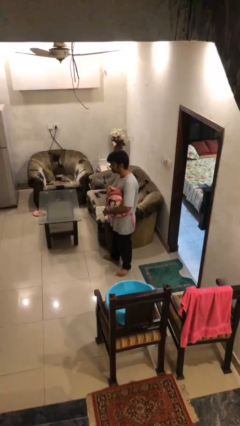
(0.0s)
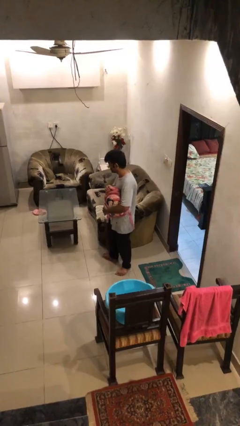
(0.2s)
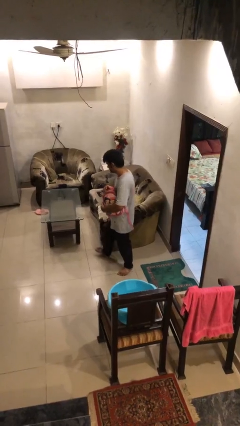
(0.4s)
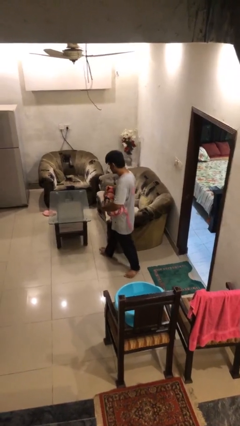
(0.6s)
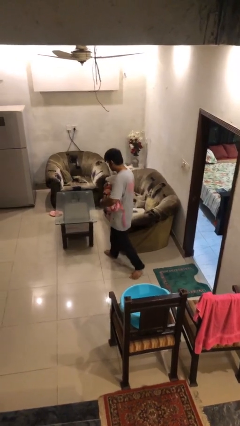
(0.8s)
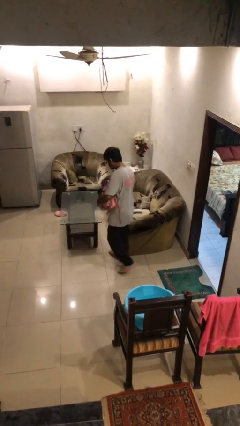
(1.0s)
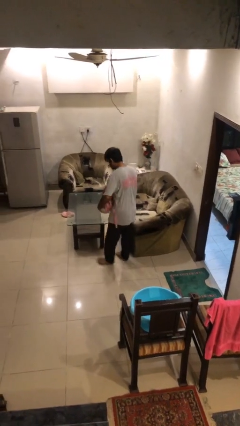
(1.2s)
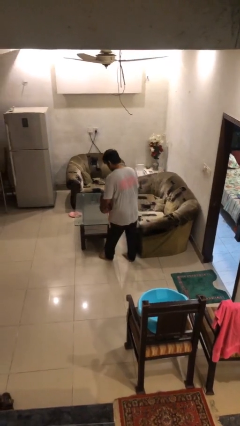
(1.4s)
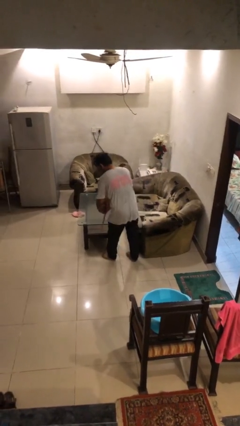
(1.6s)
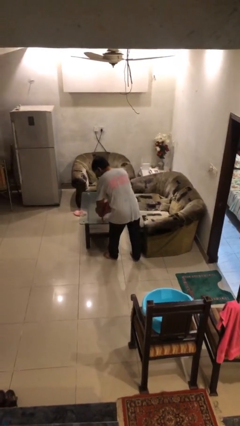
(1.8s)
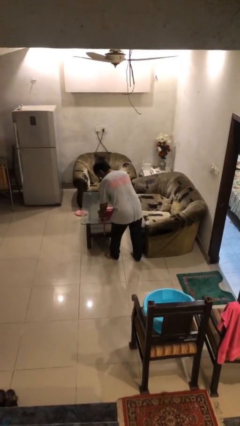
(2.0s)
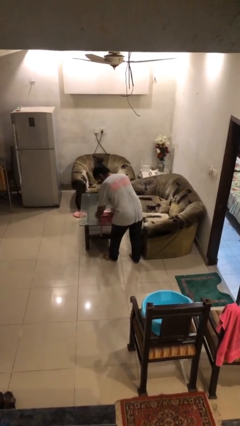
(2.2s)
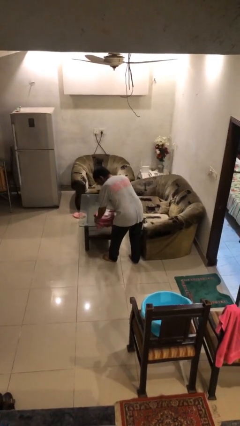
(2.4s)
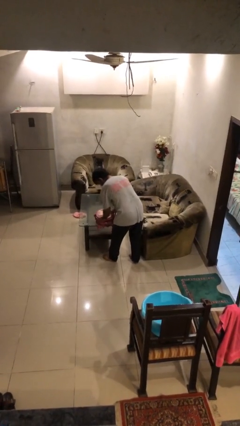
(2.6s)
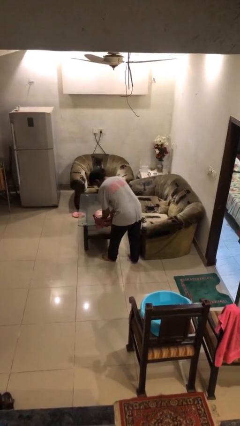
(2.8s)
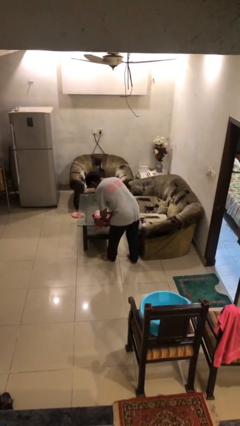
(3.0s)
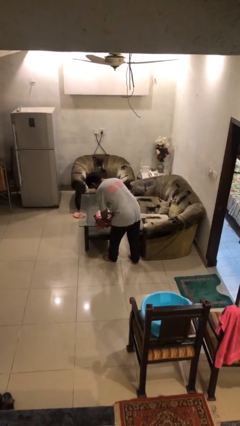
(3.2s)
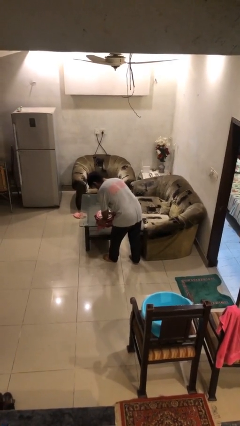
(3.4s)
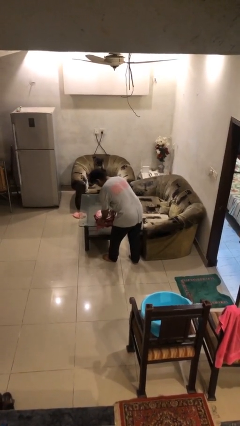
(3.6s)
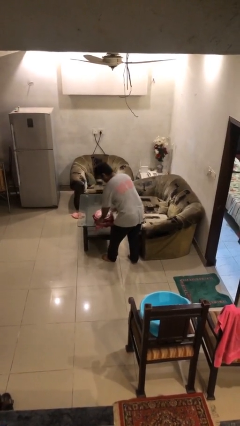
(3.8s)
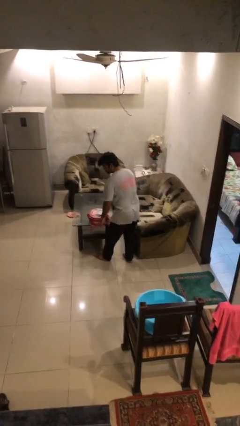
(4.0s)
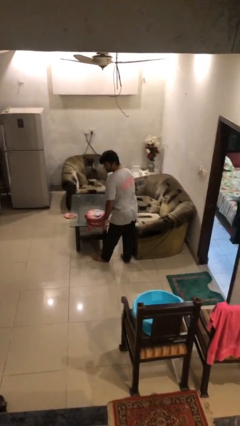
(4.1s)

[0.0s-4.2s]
person puts down object on table

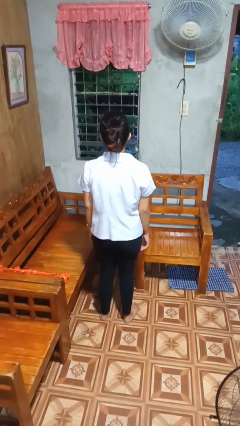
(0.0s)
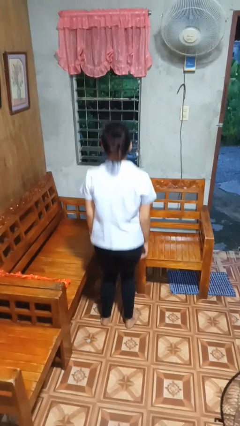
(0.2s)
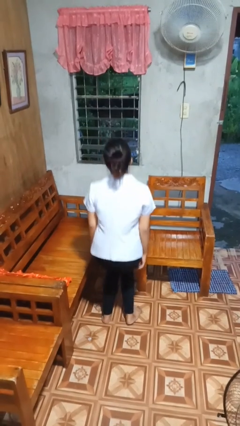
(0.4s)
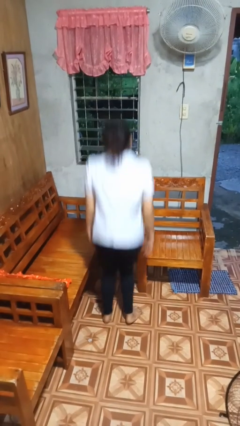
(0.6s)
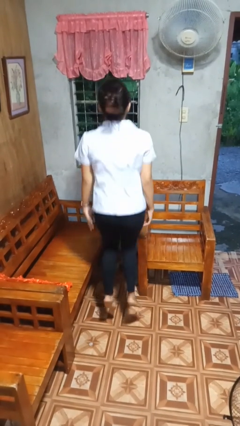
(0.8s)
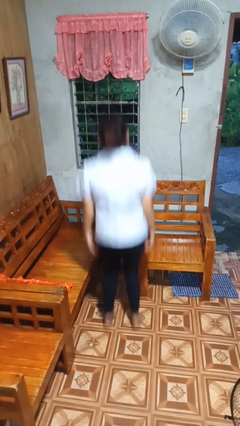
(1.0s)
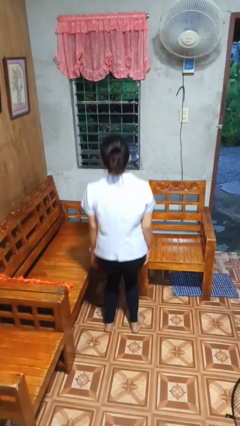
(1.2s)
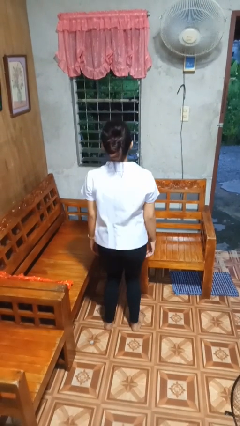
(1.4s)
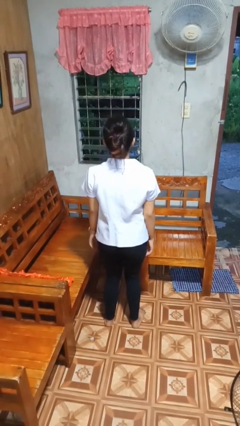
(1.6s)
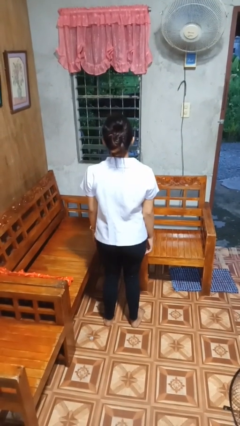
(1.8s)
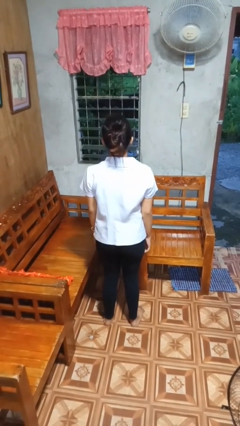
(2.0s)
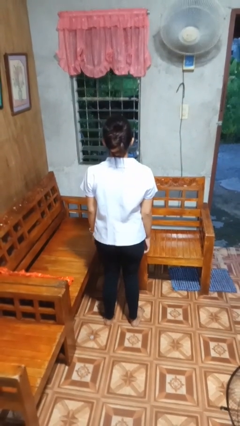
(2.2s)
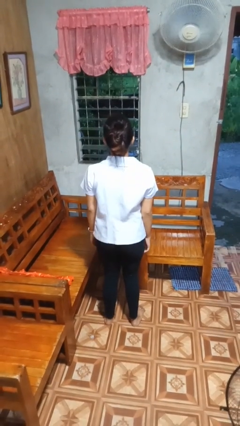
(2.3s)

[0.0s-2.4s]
person jumps

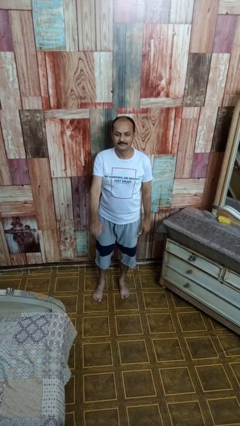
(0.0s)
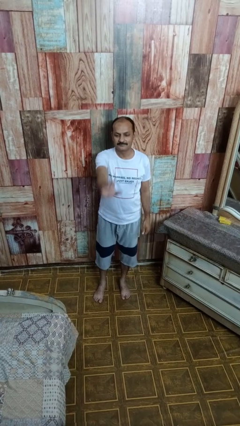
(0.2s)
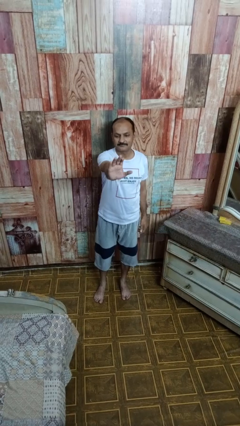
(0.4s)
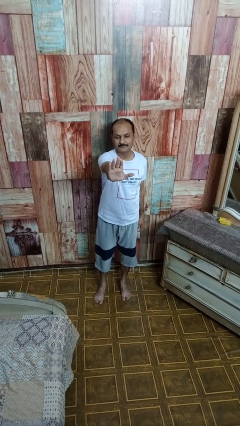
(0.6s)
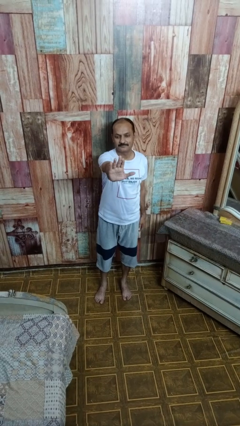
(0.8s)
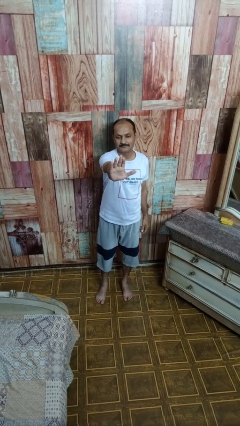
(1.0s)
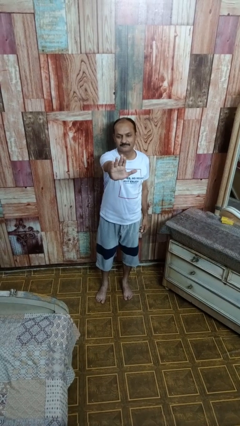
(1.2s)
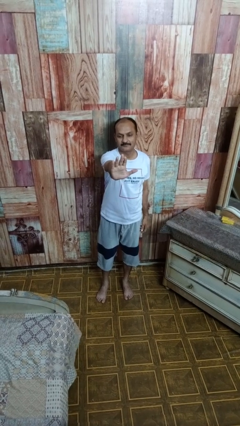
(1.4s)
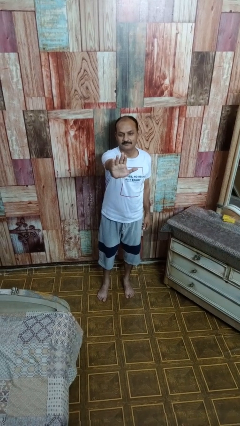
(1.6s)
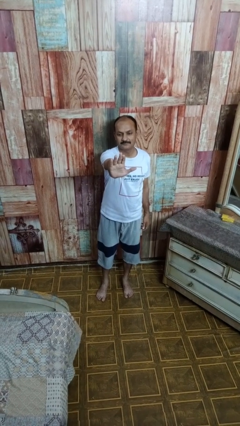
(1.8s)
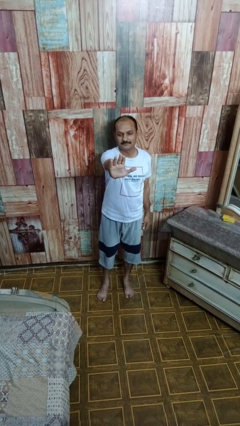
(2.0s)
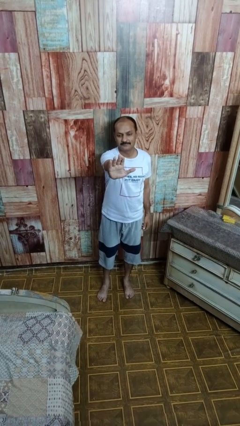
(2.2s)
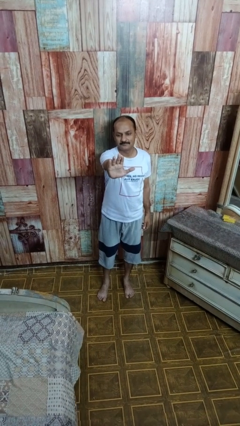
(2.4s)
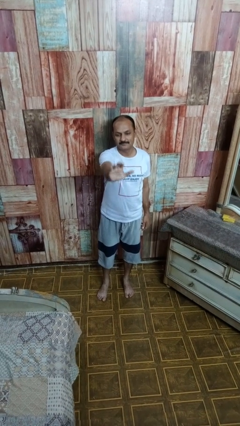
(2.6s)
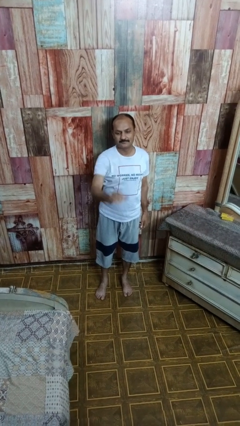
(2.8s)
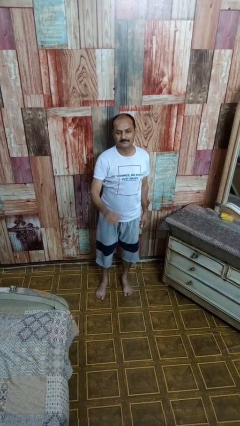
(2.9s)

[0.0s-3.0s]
person gestures stop

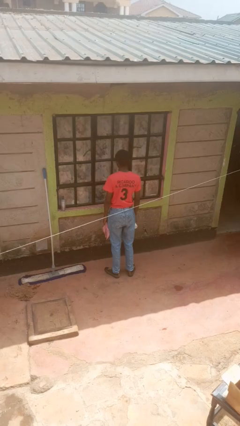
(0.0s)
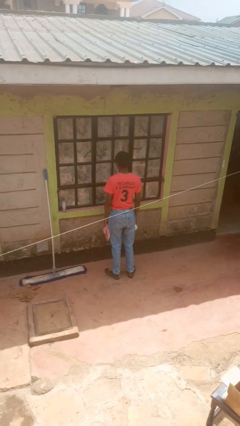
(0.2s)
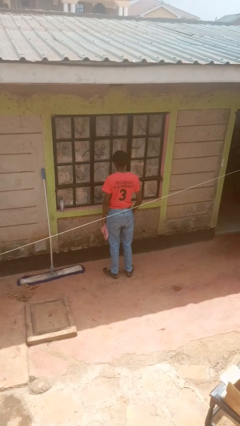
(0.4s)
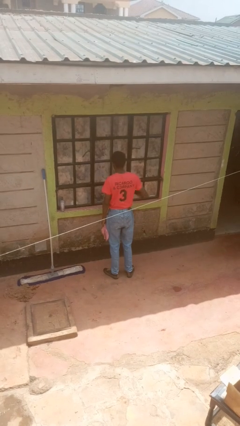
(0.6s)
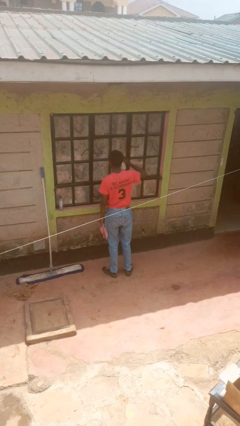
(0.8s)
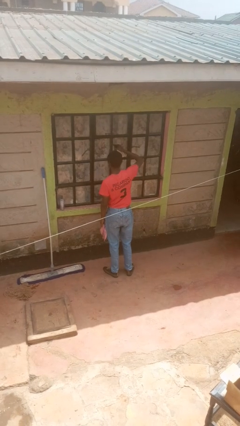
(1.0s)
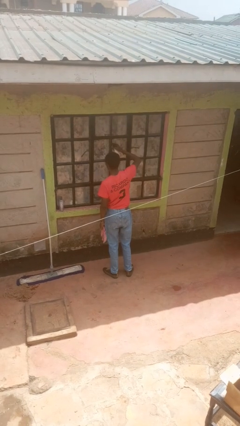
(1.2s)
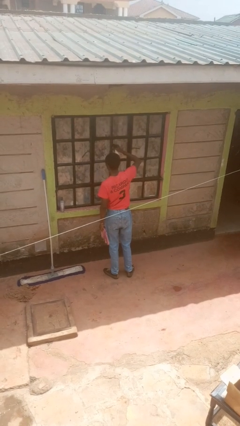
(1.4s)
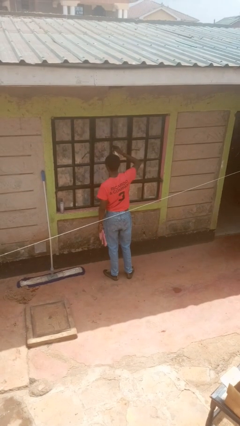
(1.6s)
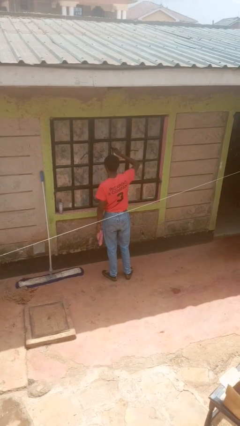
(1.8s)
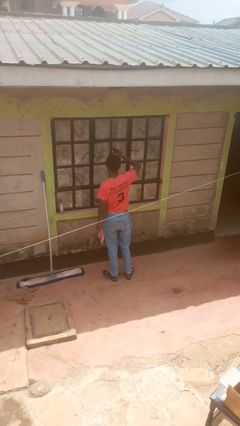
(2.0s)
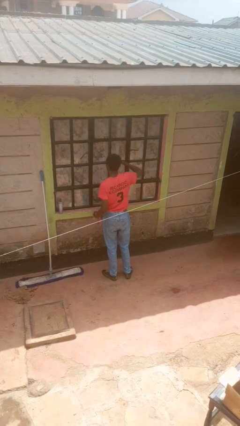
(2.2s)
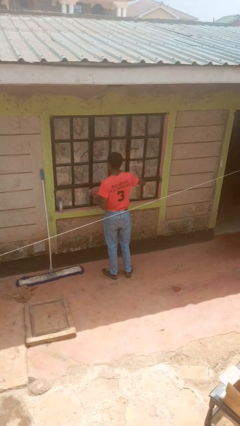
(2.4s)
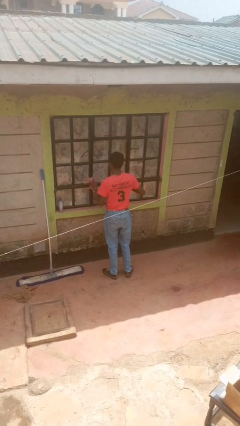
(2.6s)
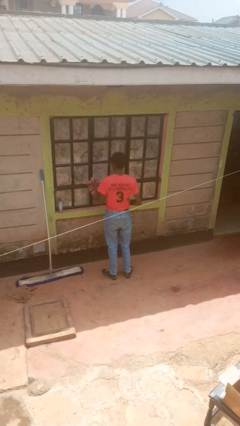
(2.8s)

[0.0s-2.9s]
person sprays from bottle

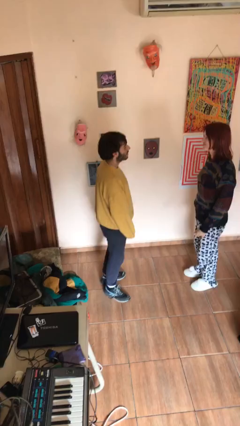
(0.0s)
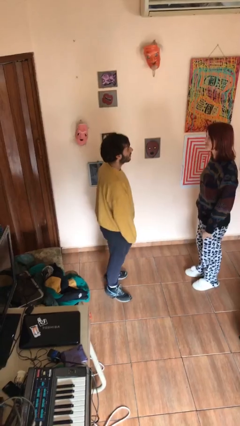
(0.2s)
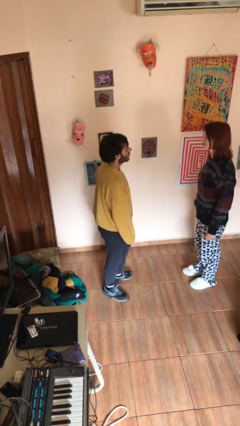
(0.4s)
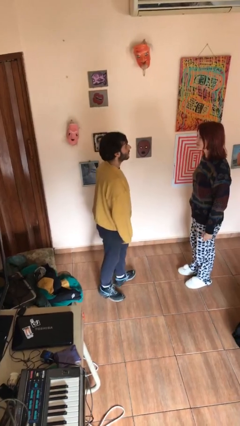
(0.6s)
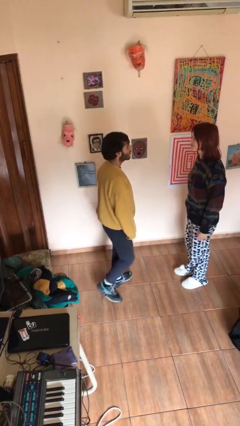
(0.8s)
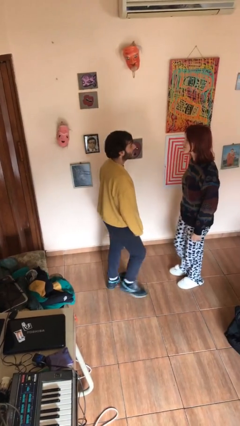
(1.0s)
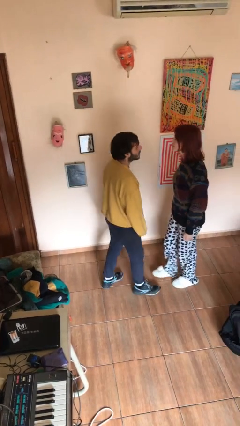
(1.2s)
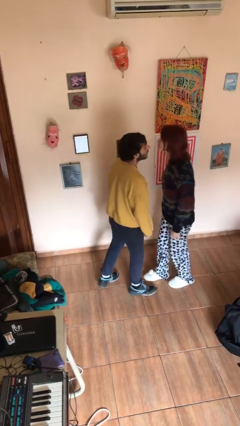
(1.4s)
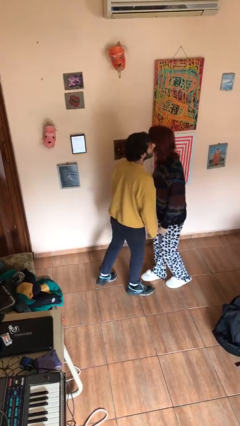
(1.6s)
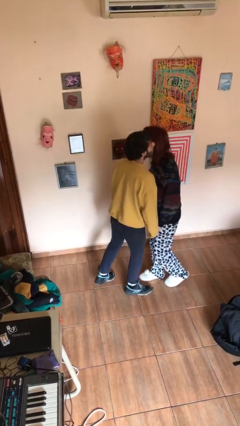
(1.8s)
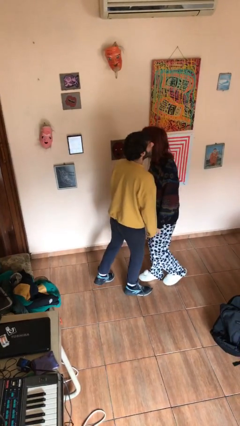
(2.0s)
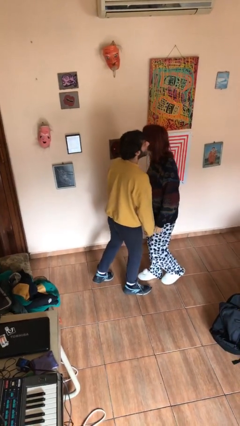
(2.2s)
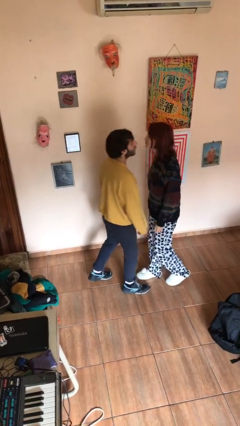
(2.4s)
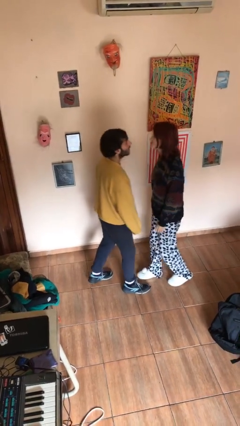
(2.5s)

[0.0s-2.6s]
person kisses cheek of person

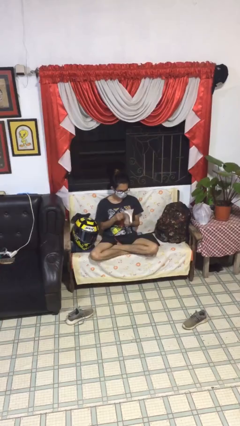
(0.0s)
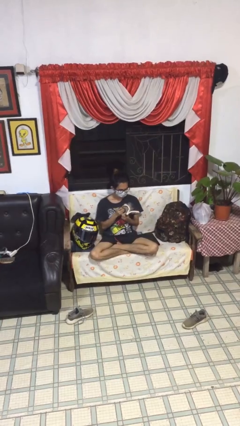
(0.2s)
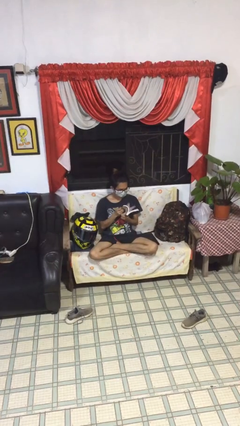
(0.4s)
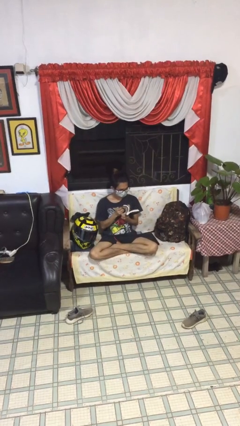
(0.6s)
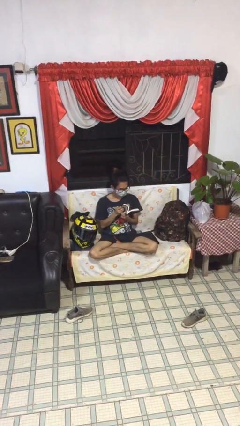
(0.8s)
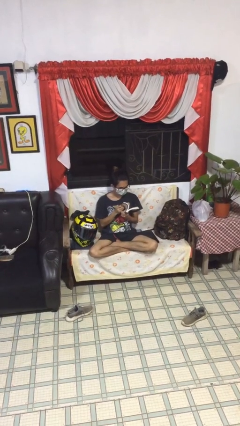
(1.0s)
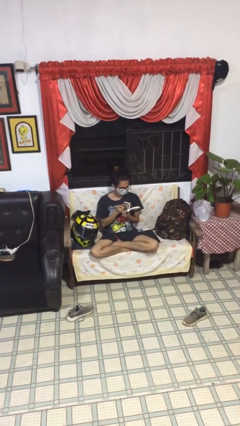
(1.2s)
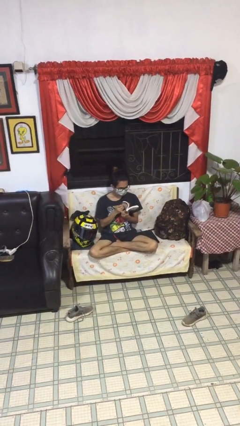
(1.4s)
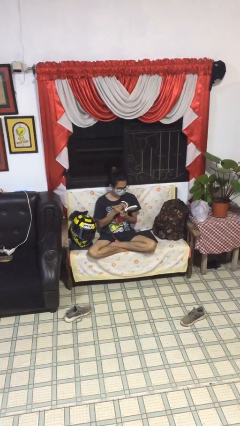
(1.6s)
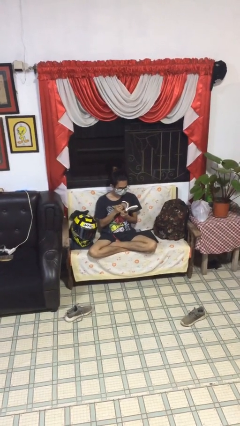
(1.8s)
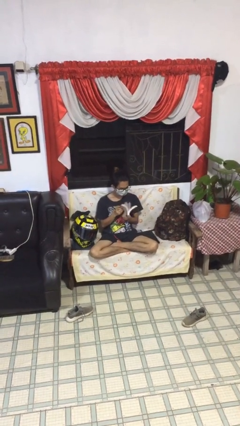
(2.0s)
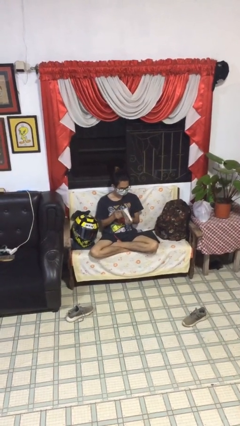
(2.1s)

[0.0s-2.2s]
person reads document

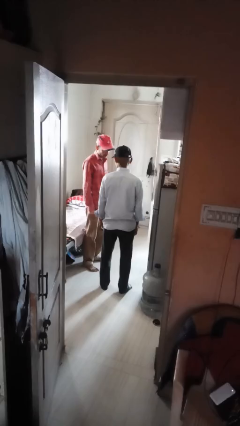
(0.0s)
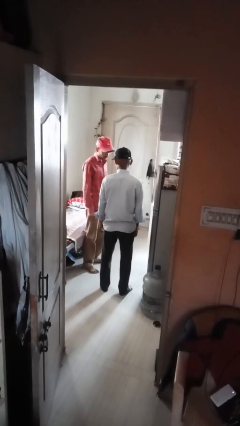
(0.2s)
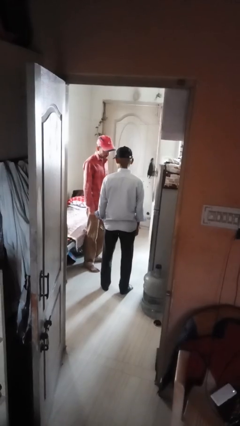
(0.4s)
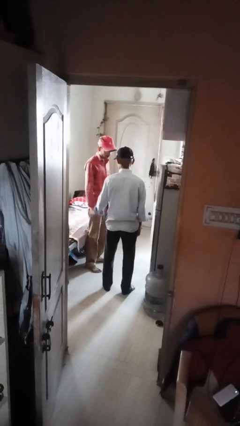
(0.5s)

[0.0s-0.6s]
person grabs person by forearm
